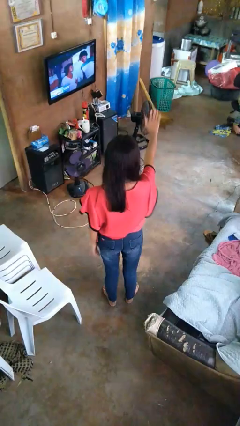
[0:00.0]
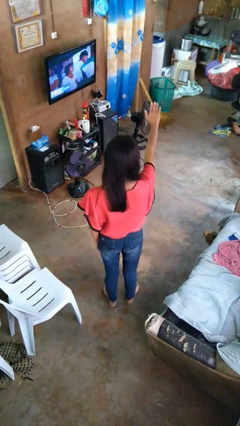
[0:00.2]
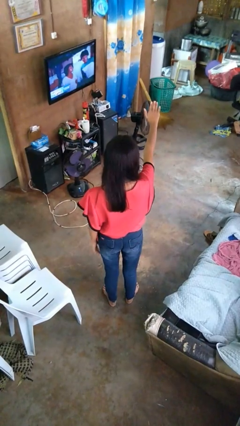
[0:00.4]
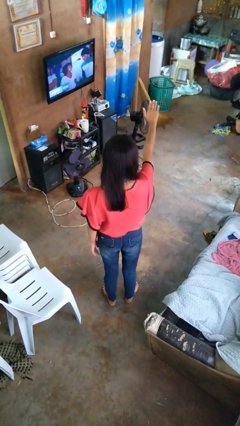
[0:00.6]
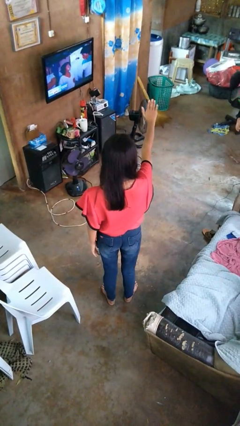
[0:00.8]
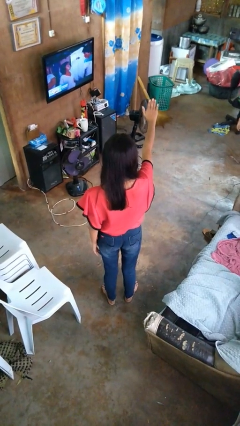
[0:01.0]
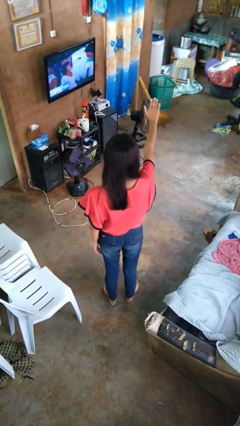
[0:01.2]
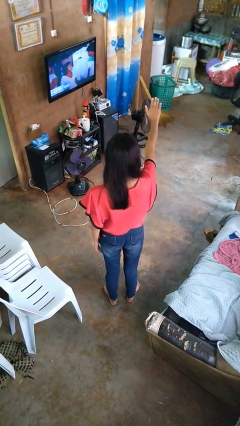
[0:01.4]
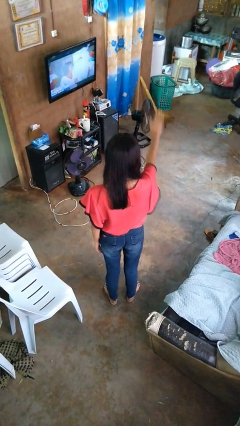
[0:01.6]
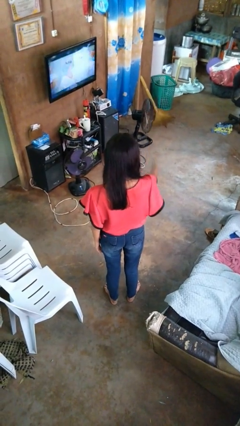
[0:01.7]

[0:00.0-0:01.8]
person gestures stop

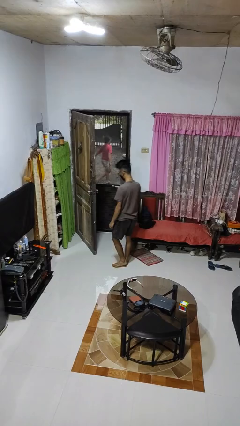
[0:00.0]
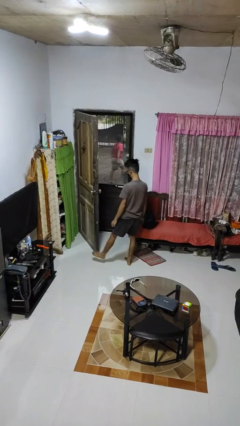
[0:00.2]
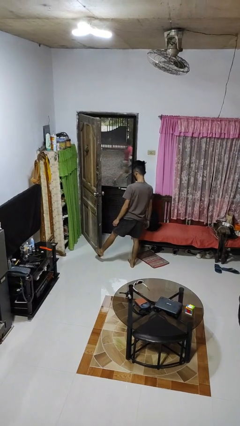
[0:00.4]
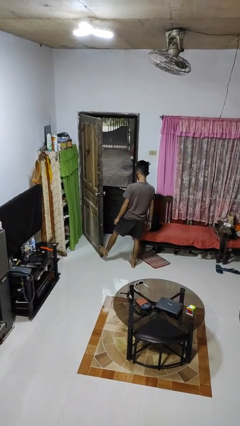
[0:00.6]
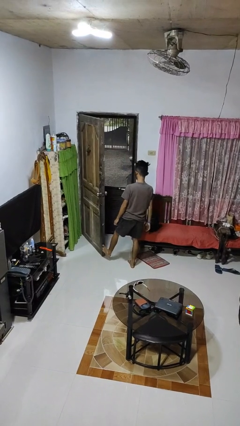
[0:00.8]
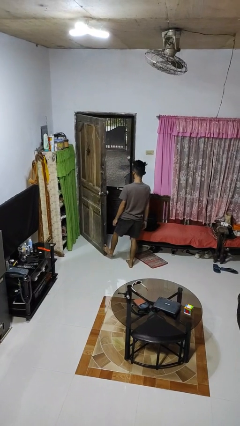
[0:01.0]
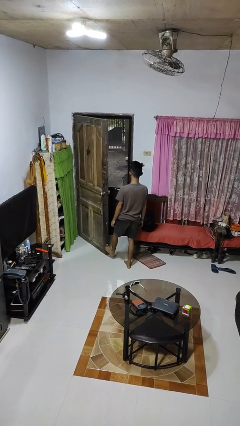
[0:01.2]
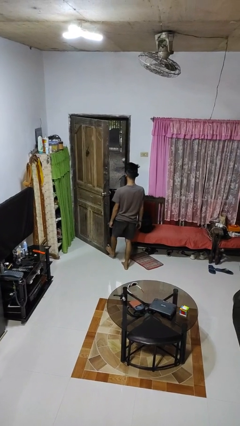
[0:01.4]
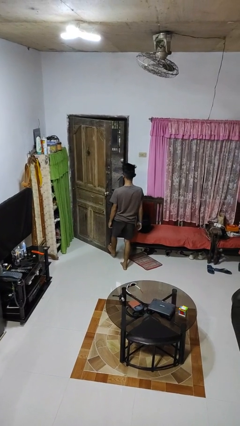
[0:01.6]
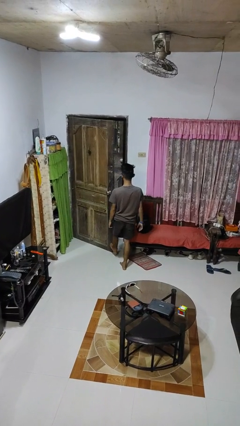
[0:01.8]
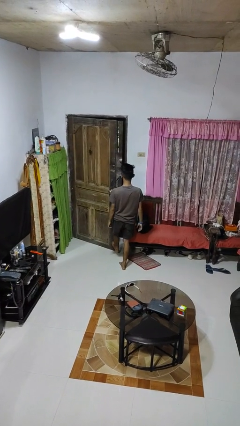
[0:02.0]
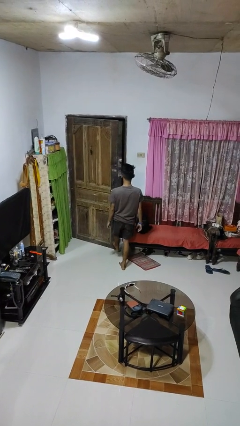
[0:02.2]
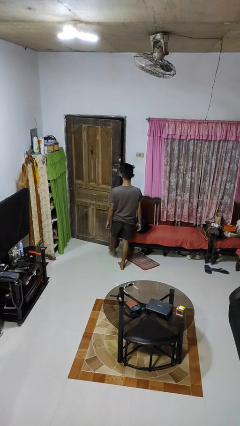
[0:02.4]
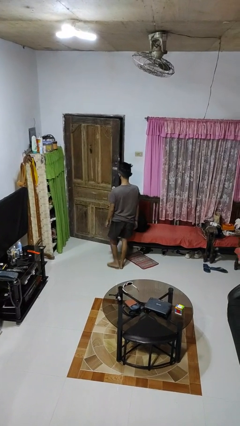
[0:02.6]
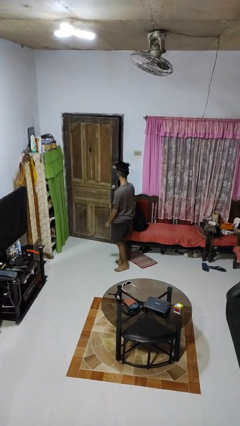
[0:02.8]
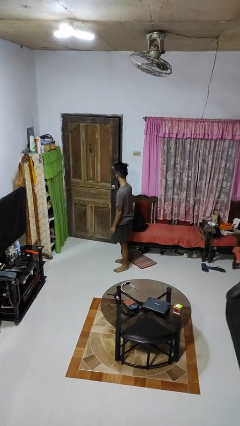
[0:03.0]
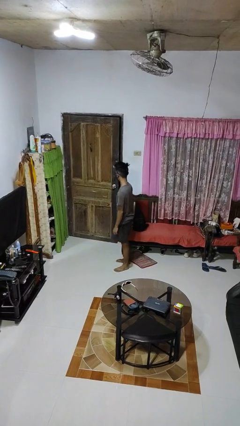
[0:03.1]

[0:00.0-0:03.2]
person closes door with foot

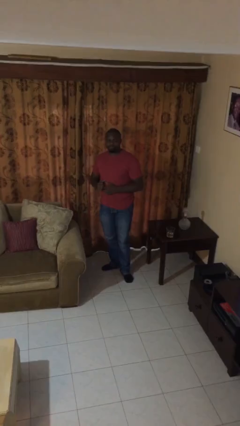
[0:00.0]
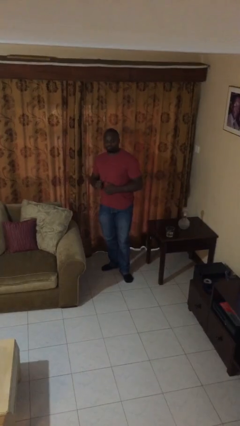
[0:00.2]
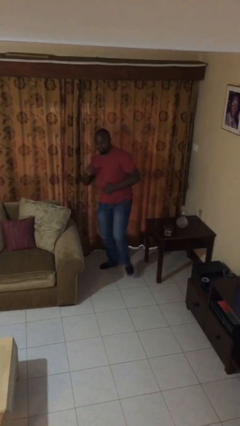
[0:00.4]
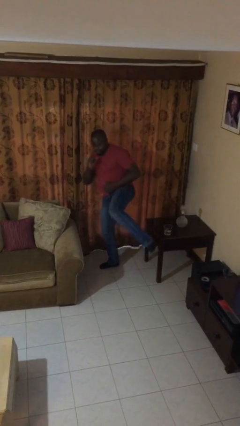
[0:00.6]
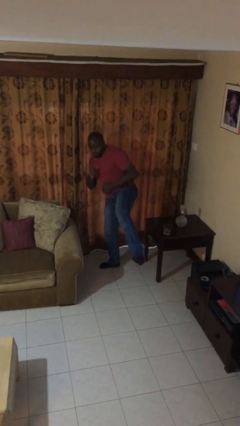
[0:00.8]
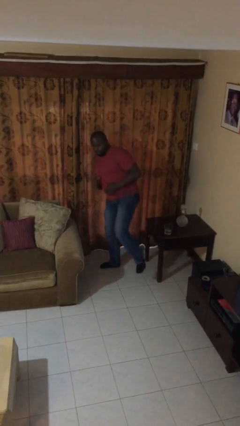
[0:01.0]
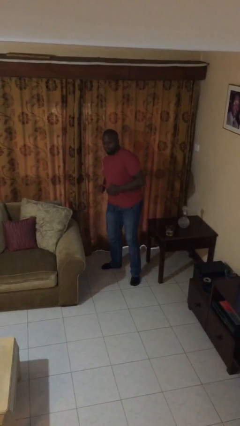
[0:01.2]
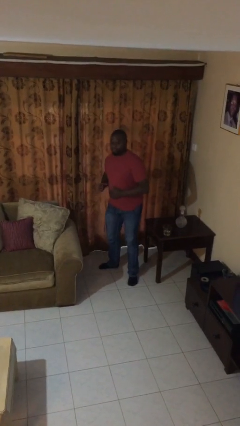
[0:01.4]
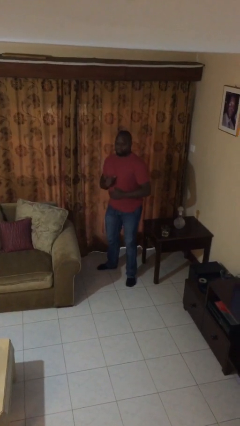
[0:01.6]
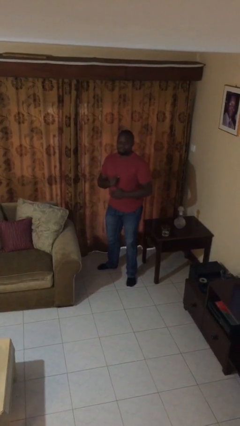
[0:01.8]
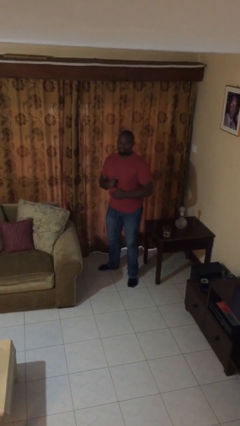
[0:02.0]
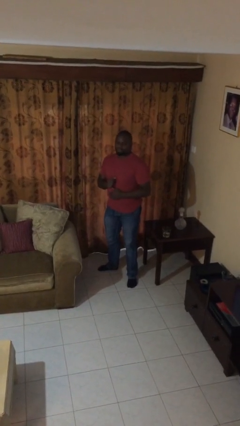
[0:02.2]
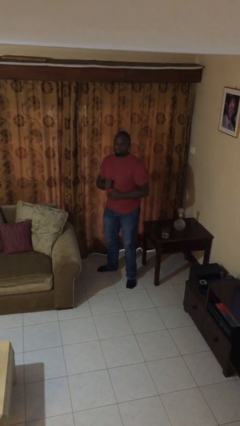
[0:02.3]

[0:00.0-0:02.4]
person karate kicks

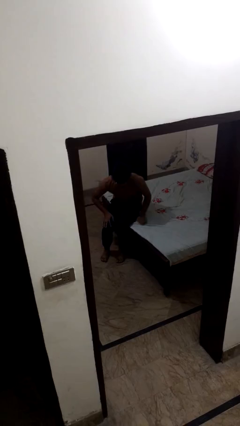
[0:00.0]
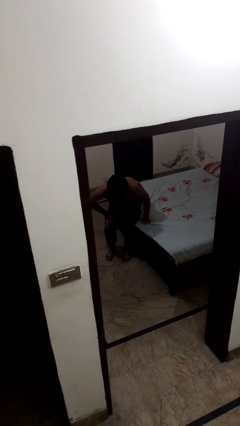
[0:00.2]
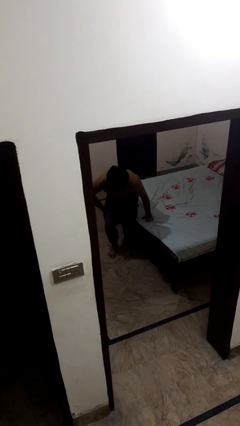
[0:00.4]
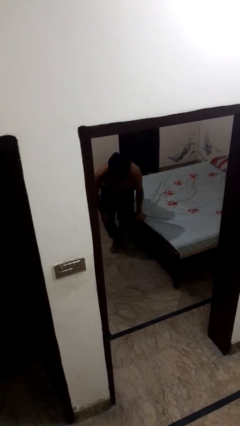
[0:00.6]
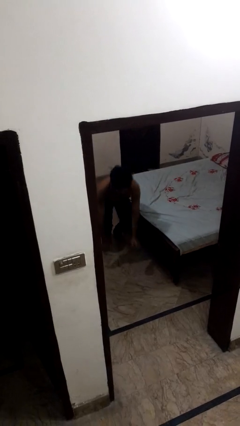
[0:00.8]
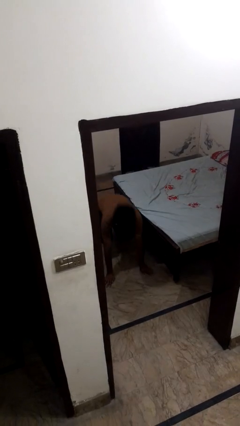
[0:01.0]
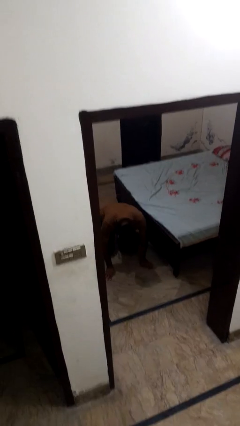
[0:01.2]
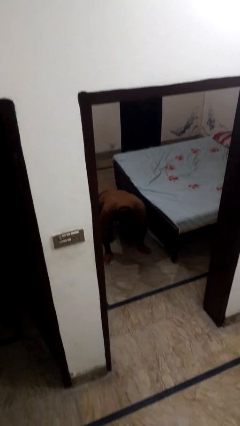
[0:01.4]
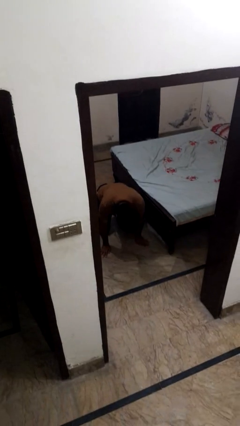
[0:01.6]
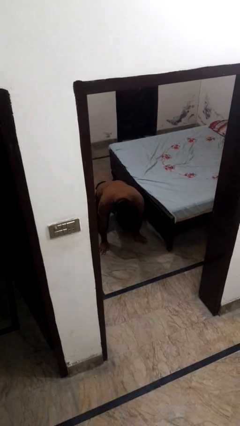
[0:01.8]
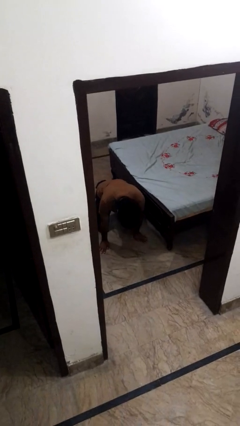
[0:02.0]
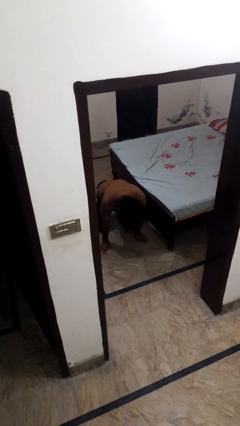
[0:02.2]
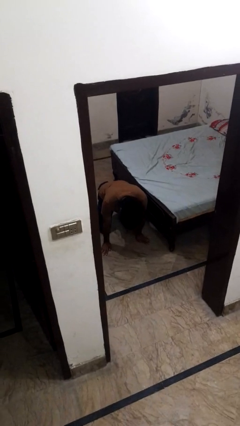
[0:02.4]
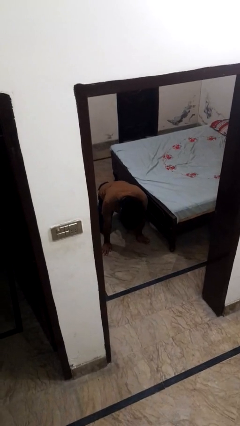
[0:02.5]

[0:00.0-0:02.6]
person falls from bed

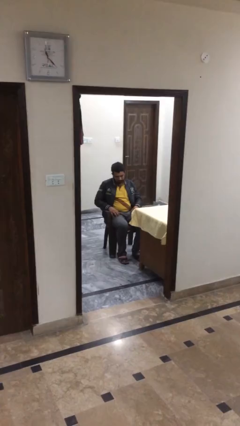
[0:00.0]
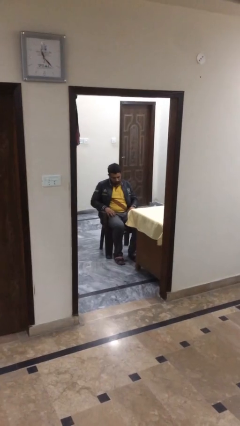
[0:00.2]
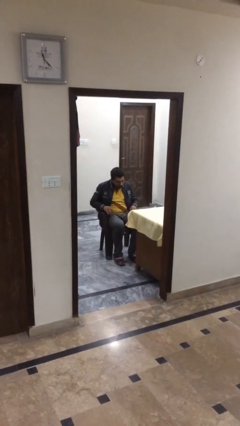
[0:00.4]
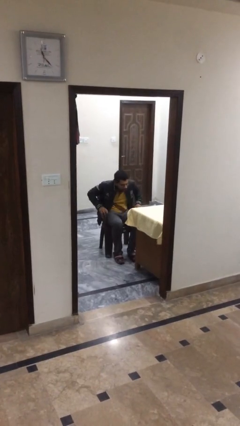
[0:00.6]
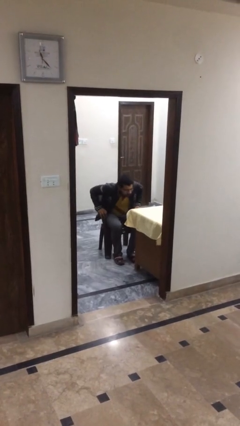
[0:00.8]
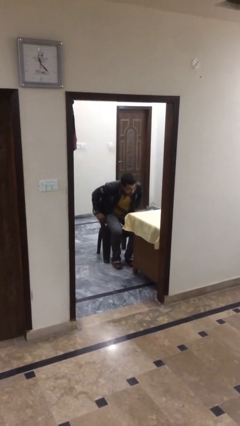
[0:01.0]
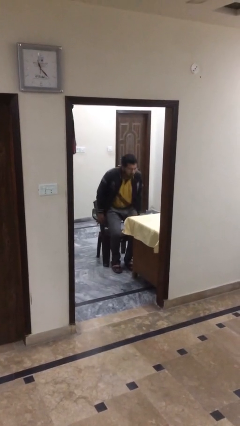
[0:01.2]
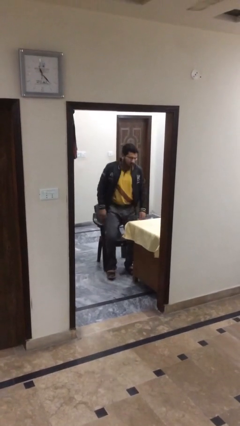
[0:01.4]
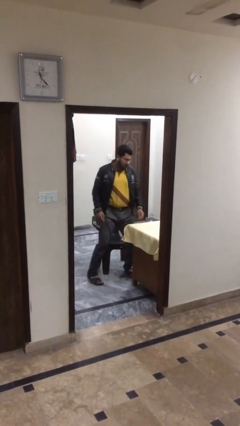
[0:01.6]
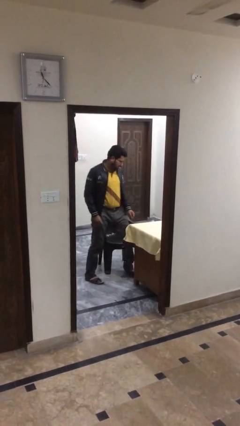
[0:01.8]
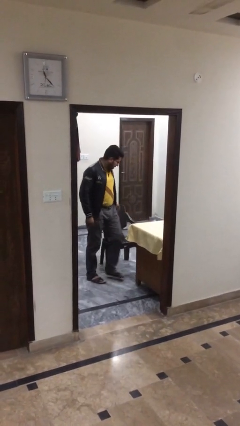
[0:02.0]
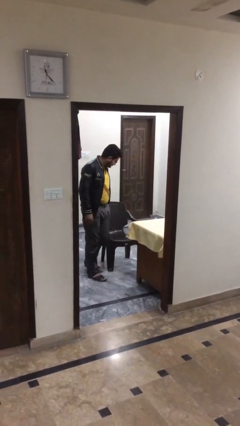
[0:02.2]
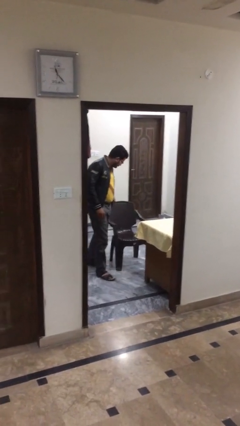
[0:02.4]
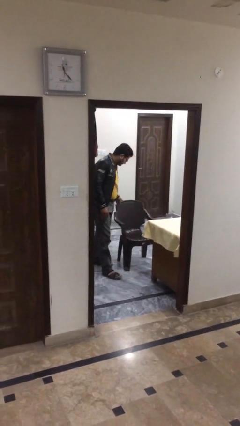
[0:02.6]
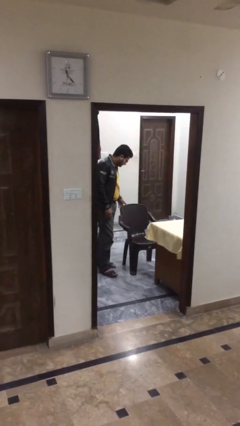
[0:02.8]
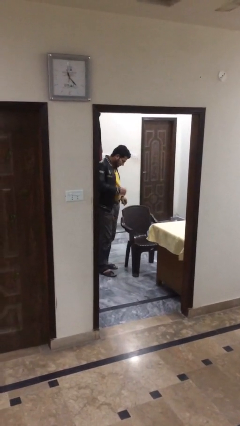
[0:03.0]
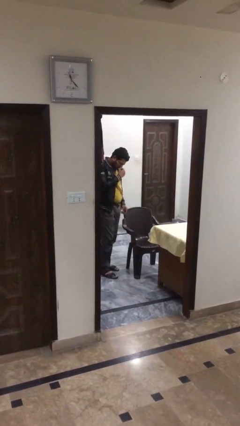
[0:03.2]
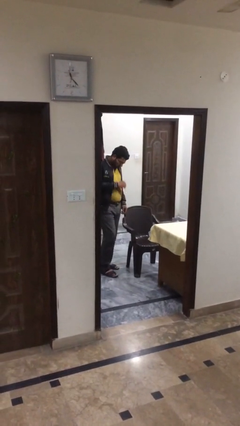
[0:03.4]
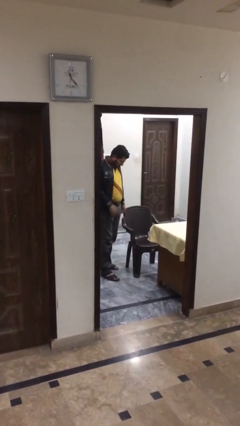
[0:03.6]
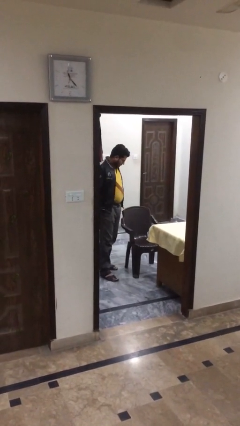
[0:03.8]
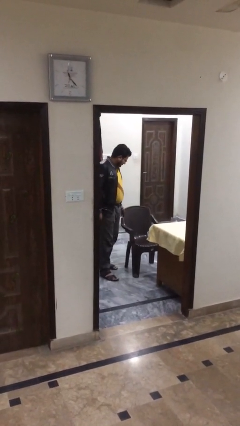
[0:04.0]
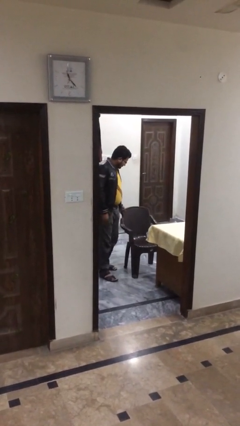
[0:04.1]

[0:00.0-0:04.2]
person stands up

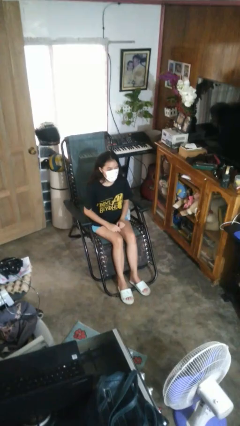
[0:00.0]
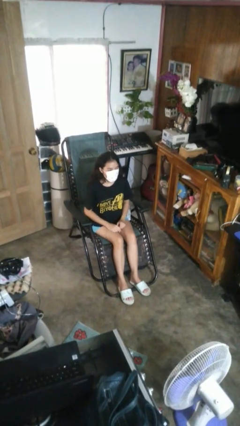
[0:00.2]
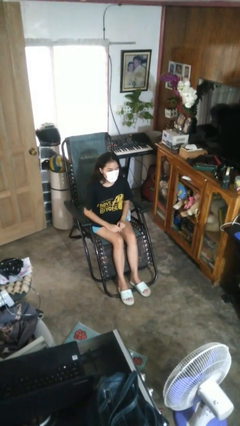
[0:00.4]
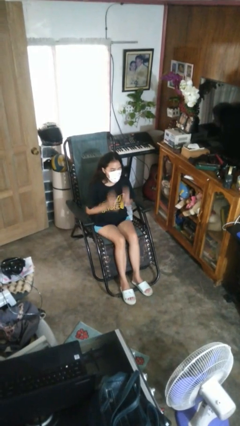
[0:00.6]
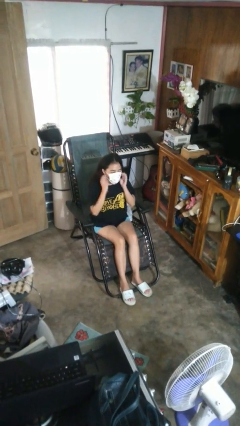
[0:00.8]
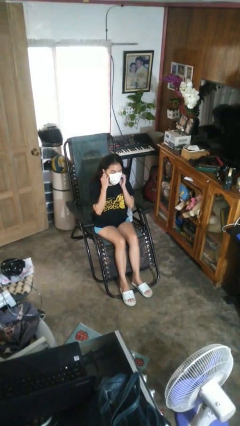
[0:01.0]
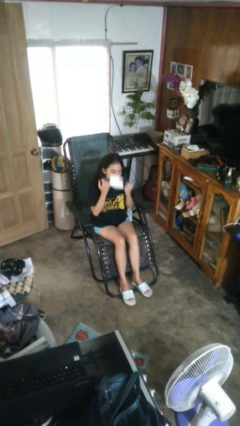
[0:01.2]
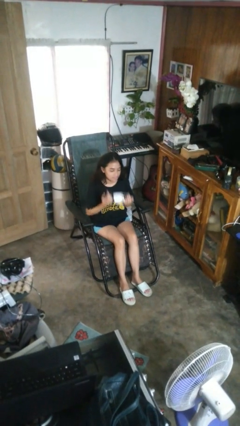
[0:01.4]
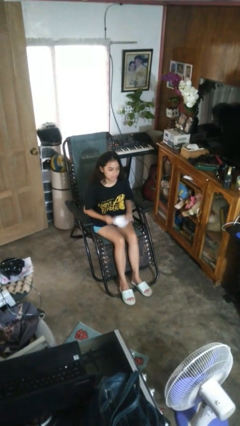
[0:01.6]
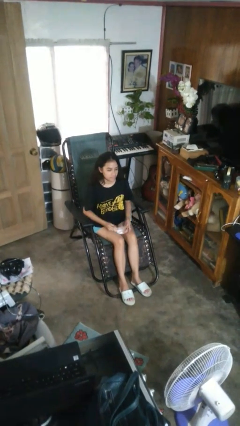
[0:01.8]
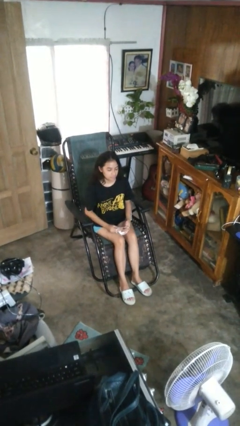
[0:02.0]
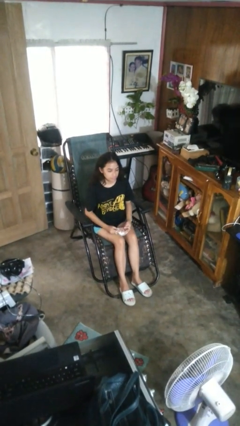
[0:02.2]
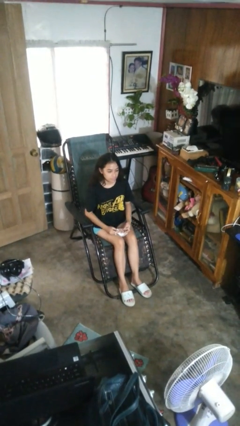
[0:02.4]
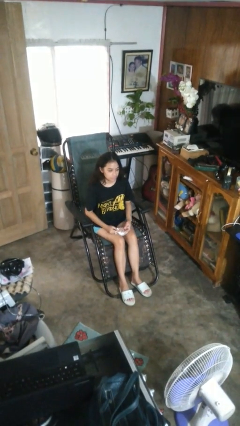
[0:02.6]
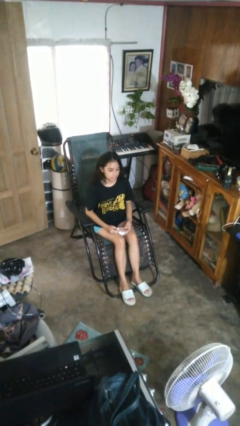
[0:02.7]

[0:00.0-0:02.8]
person takes off facemask

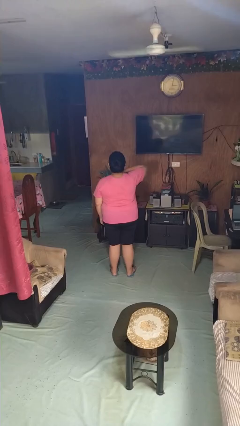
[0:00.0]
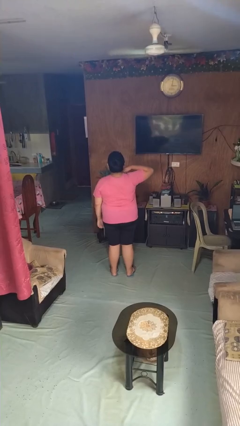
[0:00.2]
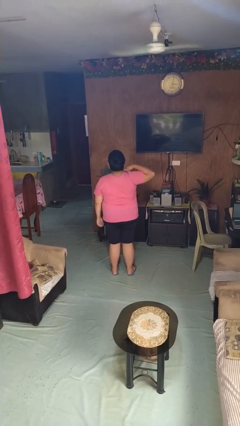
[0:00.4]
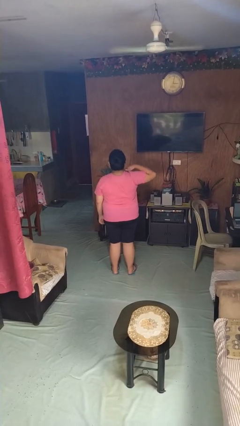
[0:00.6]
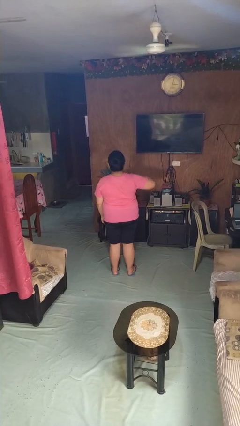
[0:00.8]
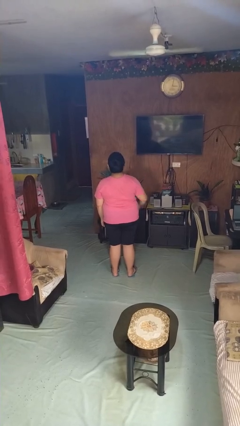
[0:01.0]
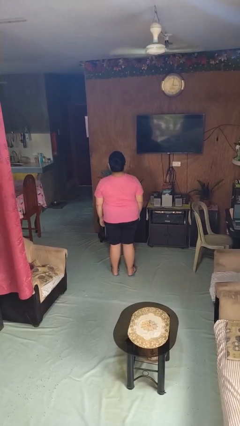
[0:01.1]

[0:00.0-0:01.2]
person gestures cut
